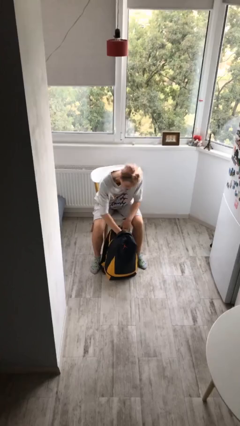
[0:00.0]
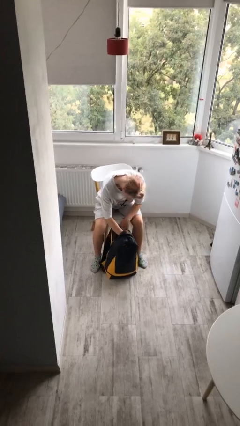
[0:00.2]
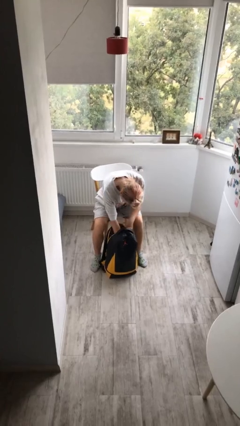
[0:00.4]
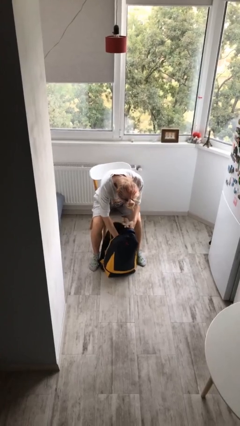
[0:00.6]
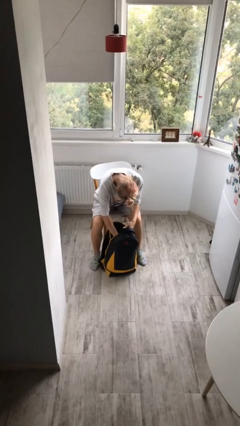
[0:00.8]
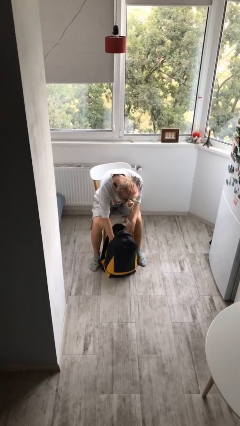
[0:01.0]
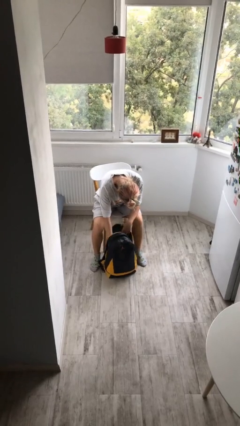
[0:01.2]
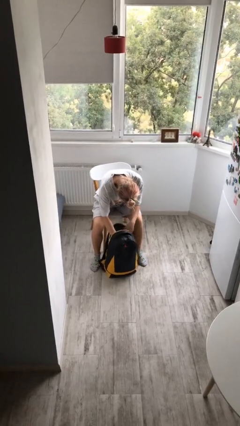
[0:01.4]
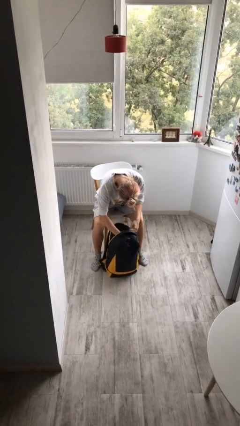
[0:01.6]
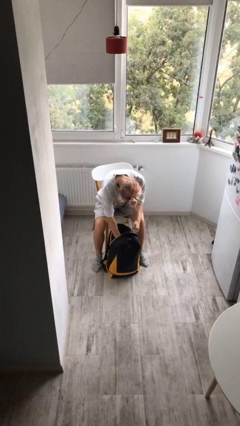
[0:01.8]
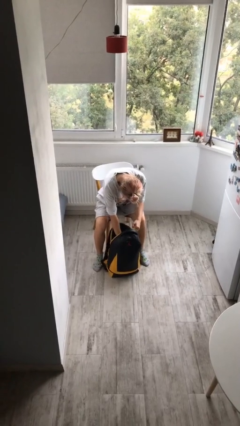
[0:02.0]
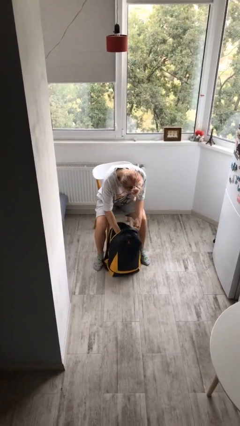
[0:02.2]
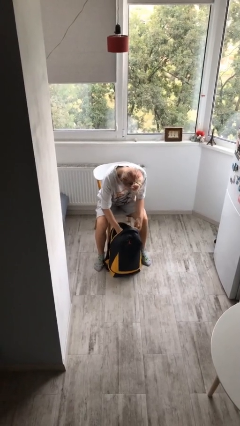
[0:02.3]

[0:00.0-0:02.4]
person searches in backpack

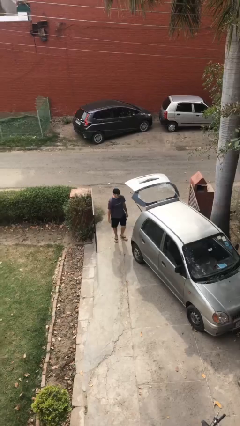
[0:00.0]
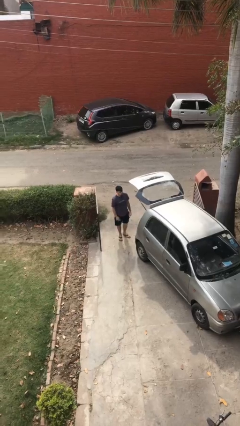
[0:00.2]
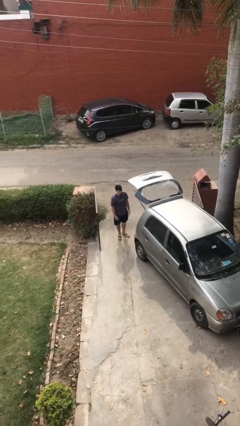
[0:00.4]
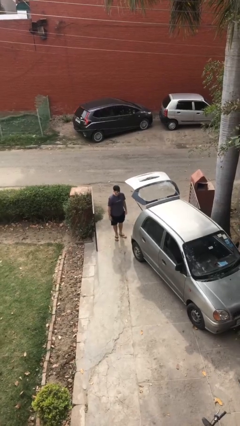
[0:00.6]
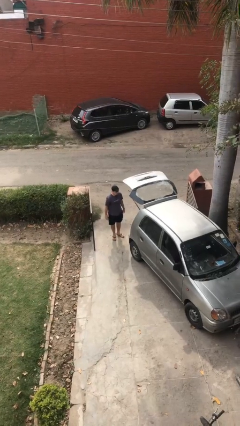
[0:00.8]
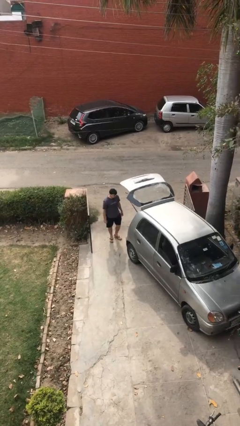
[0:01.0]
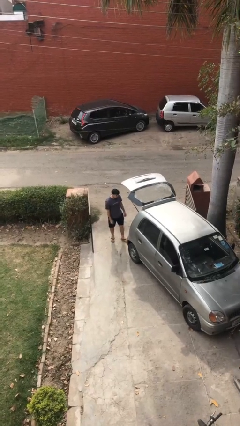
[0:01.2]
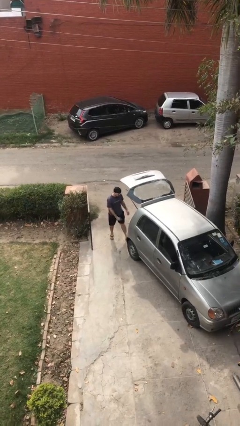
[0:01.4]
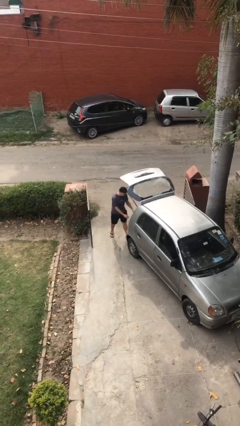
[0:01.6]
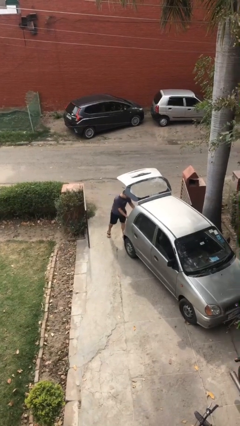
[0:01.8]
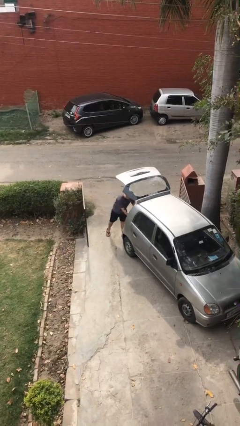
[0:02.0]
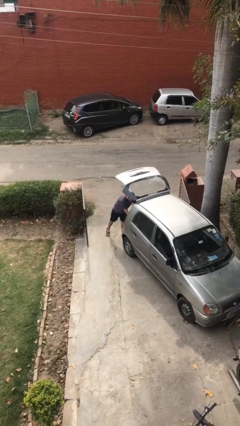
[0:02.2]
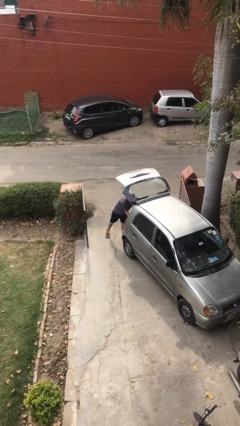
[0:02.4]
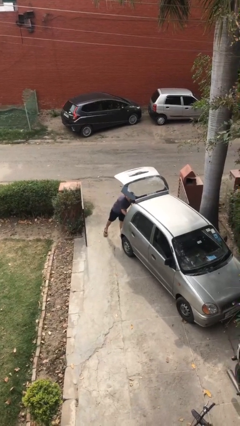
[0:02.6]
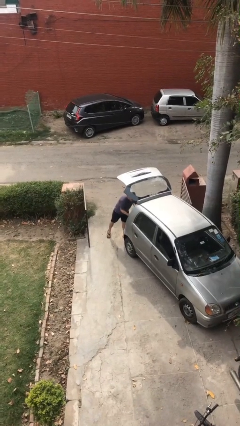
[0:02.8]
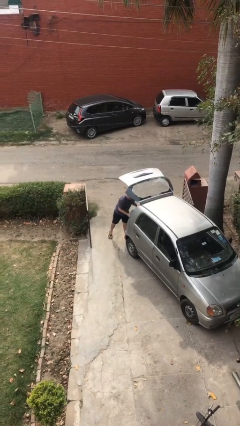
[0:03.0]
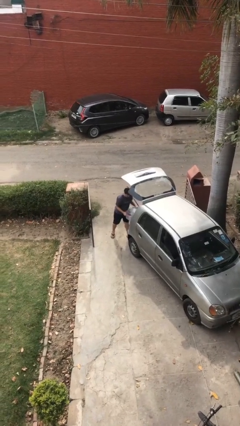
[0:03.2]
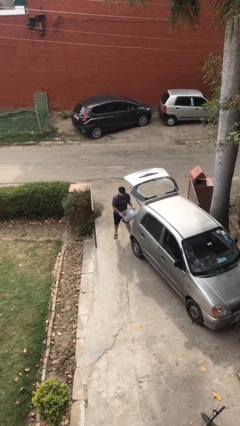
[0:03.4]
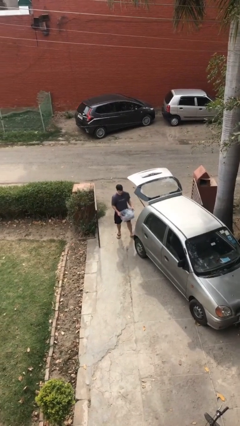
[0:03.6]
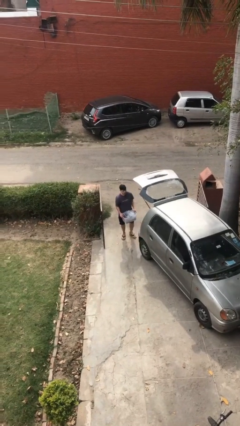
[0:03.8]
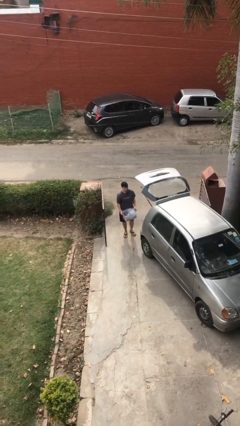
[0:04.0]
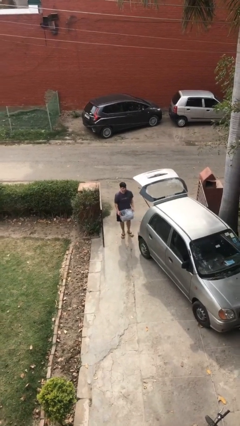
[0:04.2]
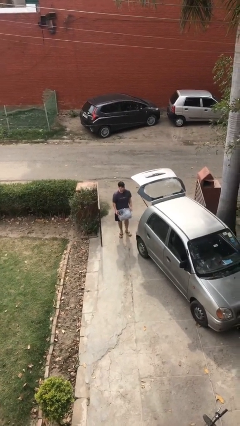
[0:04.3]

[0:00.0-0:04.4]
person unloads car

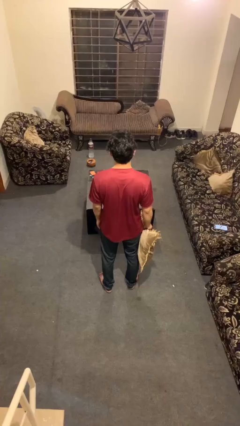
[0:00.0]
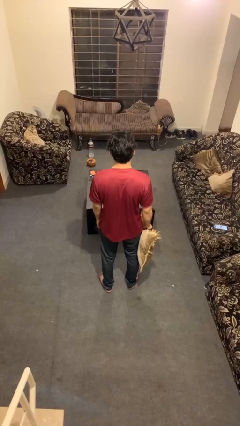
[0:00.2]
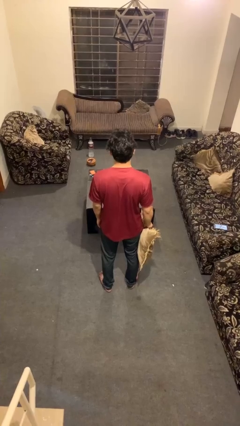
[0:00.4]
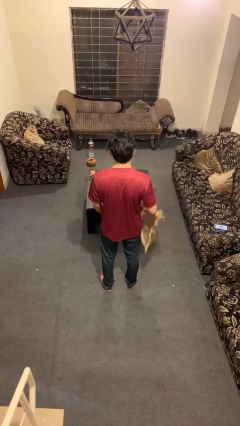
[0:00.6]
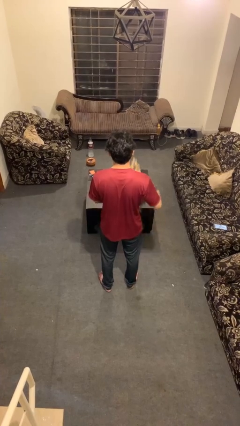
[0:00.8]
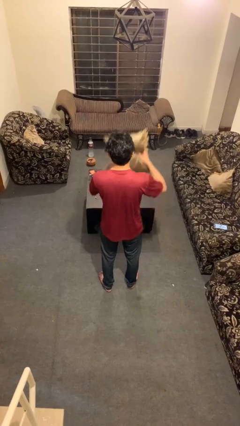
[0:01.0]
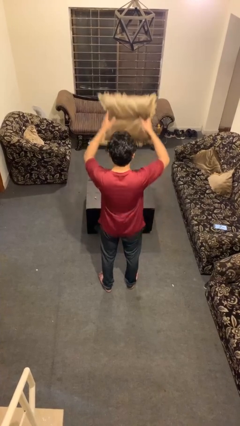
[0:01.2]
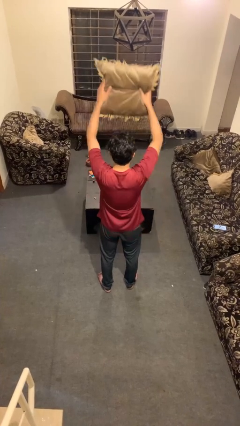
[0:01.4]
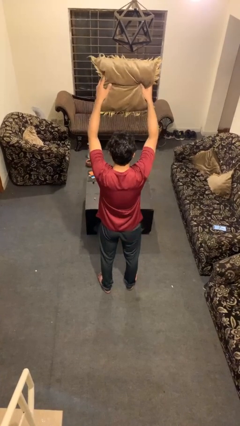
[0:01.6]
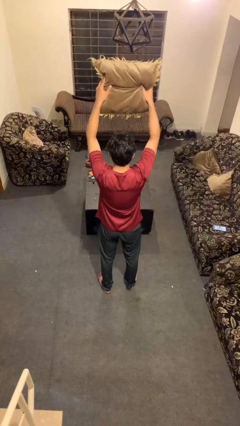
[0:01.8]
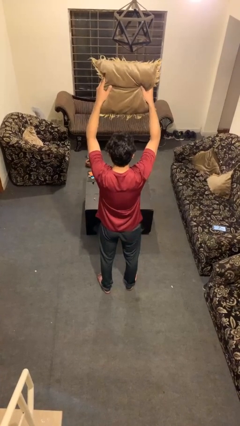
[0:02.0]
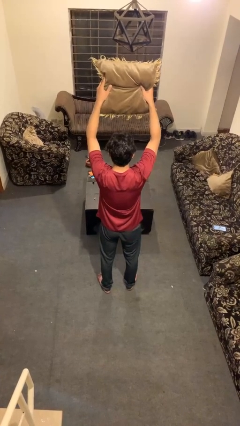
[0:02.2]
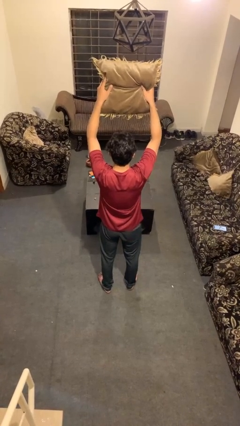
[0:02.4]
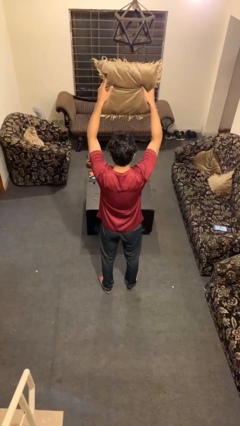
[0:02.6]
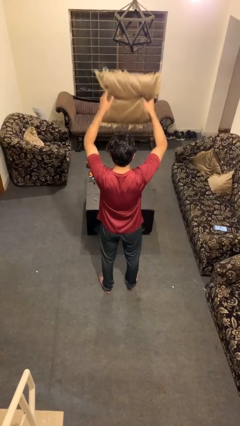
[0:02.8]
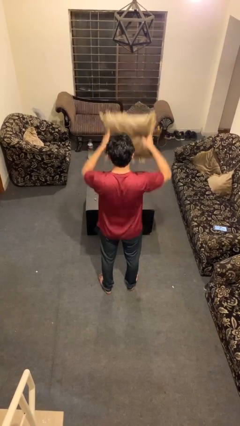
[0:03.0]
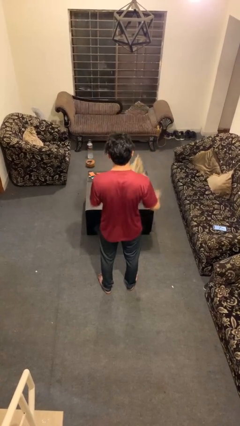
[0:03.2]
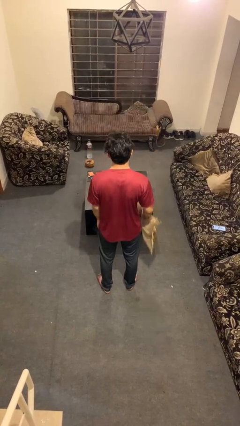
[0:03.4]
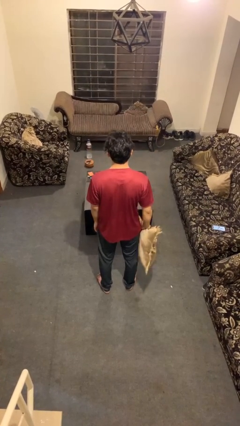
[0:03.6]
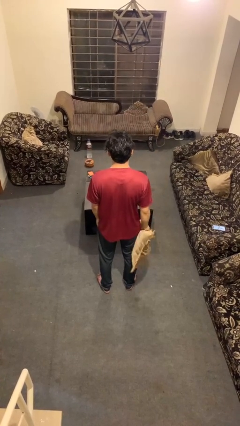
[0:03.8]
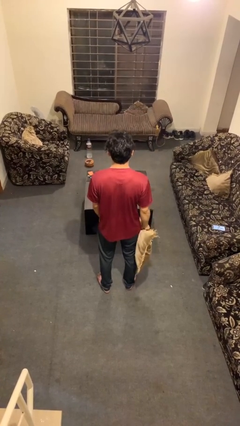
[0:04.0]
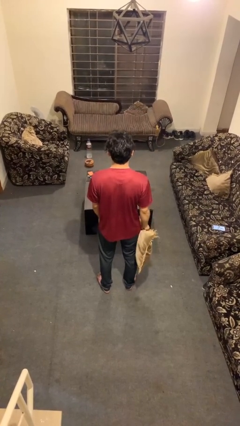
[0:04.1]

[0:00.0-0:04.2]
person holds object above head

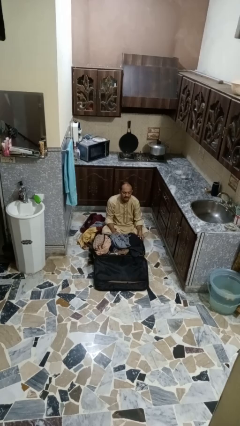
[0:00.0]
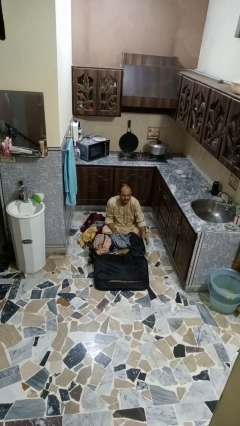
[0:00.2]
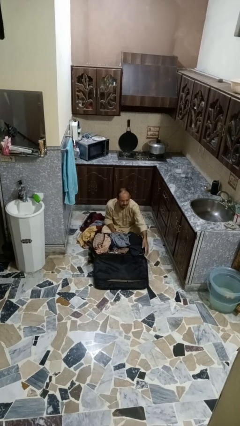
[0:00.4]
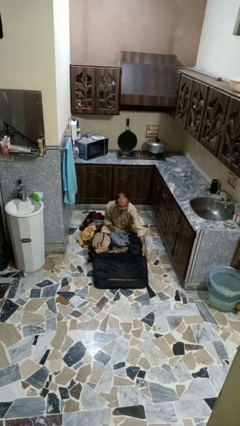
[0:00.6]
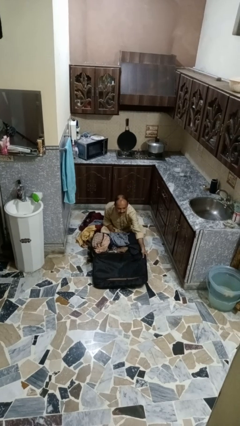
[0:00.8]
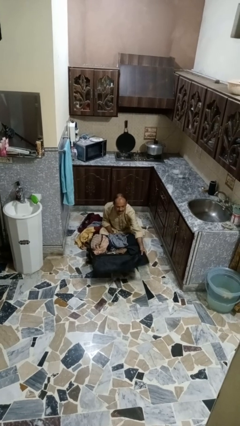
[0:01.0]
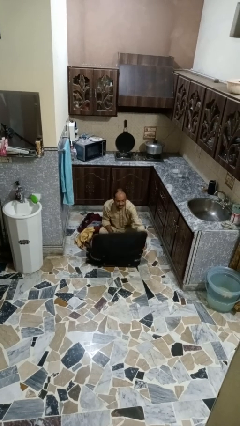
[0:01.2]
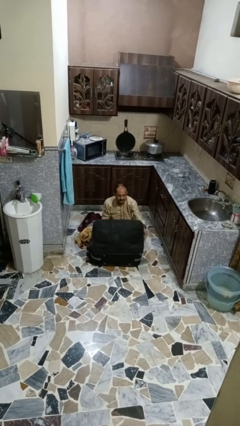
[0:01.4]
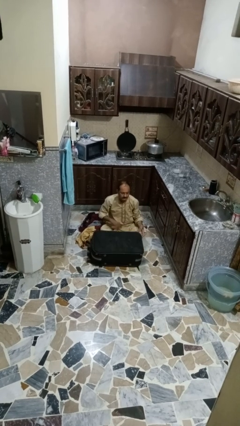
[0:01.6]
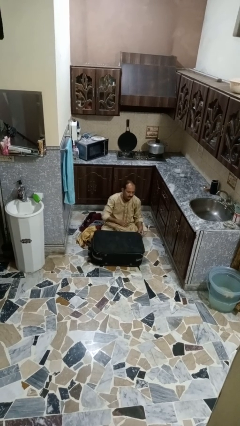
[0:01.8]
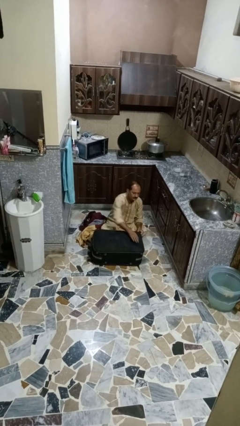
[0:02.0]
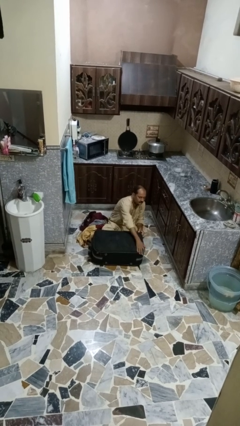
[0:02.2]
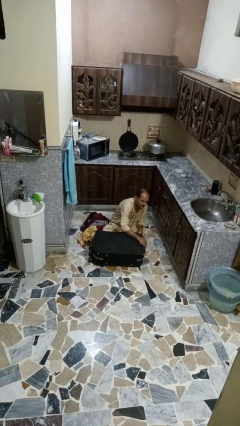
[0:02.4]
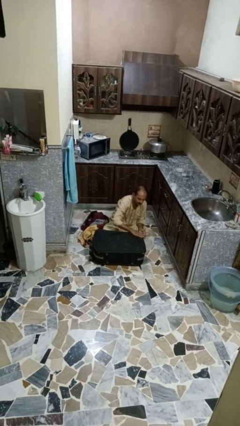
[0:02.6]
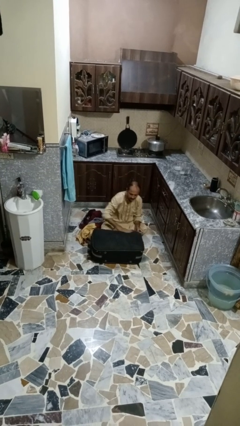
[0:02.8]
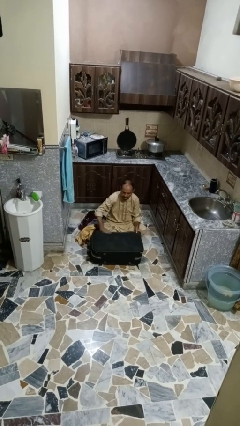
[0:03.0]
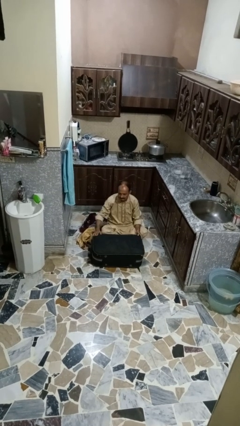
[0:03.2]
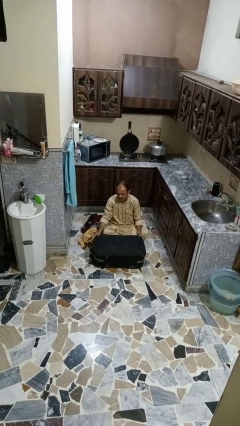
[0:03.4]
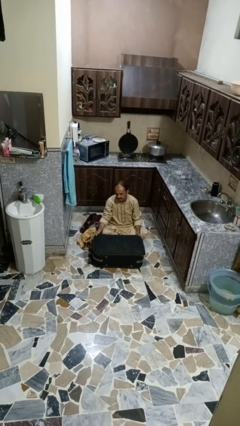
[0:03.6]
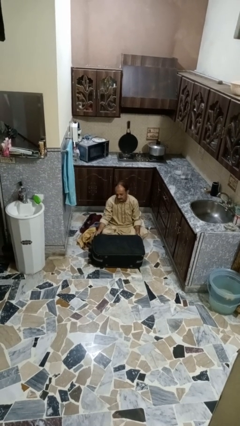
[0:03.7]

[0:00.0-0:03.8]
person closes suitcase

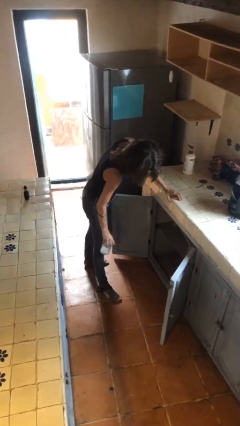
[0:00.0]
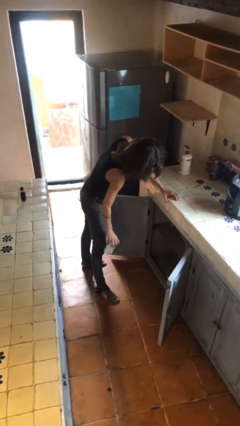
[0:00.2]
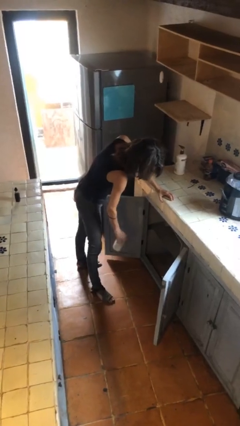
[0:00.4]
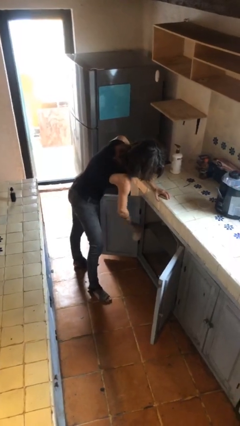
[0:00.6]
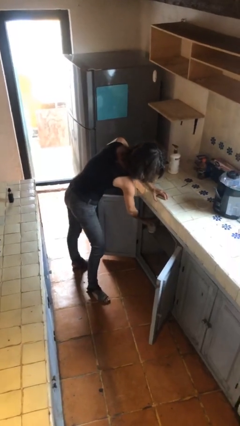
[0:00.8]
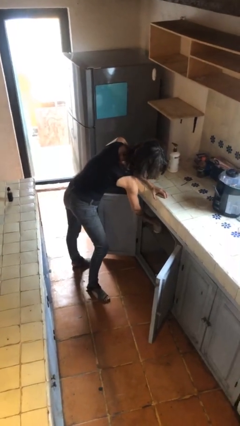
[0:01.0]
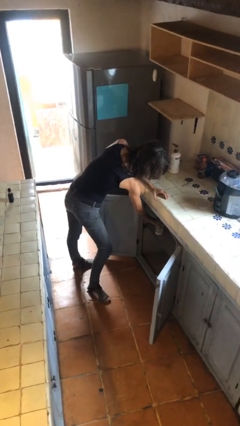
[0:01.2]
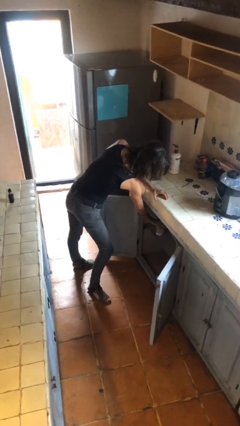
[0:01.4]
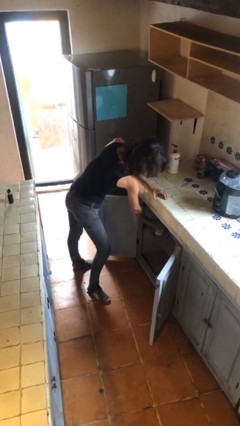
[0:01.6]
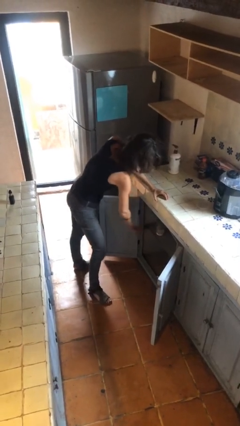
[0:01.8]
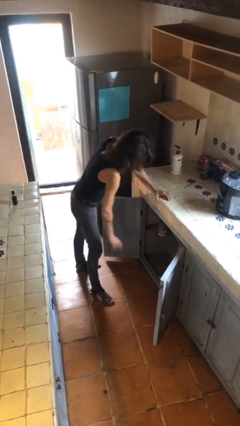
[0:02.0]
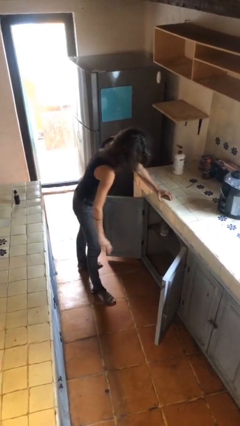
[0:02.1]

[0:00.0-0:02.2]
person puts down object into cabinet

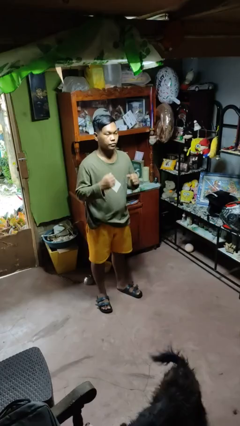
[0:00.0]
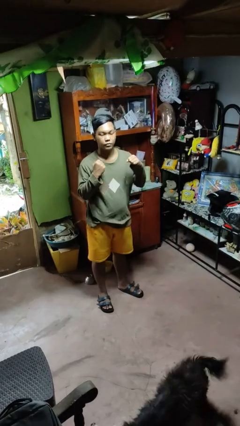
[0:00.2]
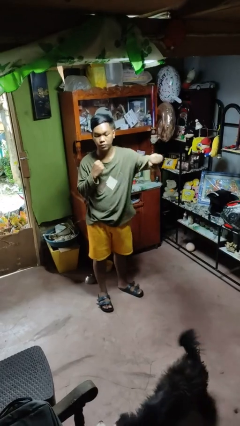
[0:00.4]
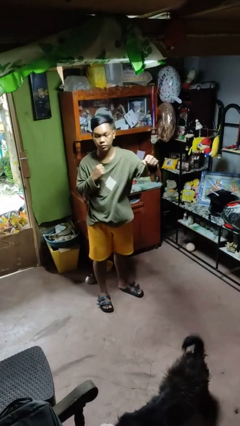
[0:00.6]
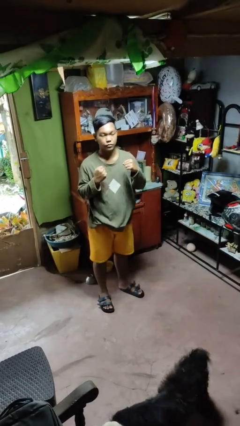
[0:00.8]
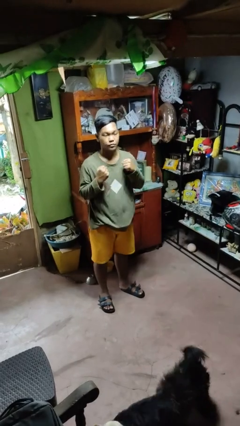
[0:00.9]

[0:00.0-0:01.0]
person punches
